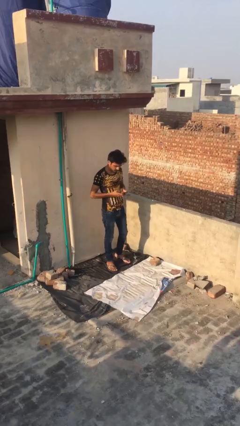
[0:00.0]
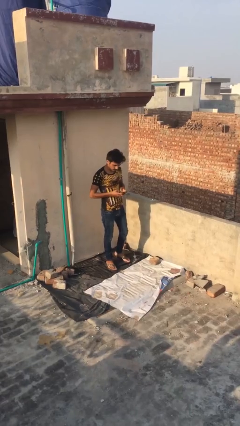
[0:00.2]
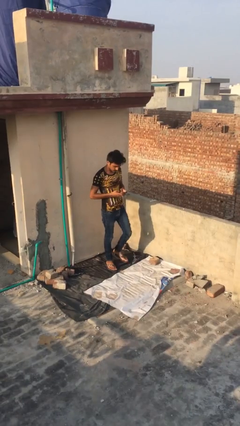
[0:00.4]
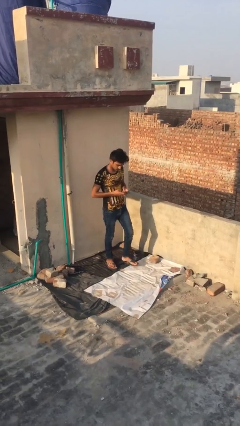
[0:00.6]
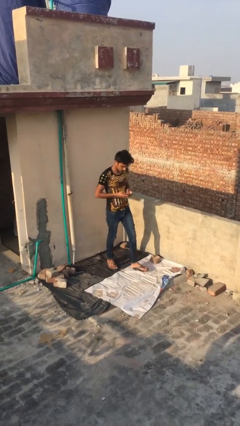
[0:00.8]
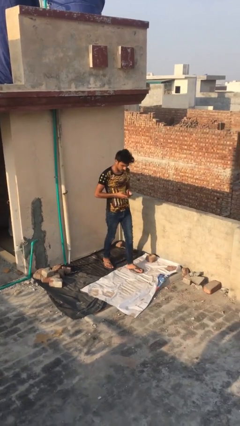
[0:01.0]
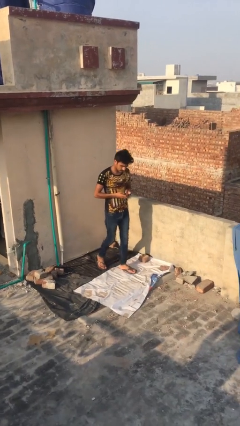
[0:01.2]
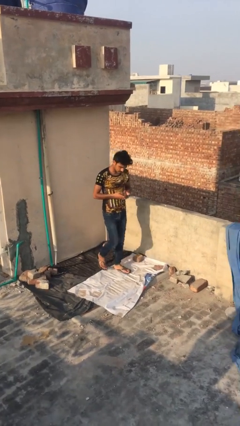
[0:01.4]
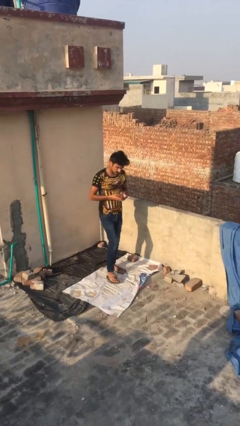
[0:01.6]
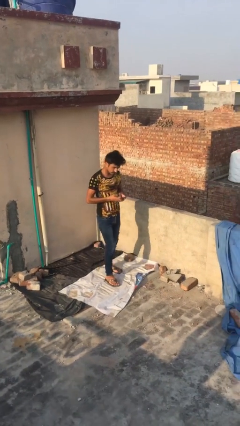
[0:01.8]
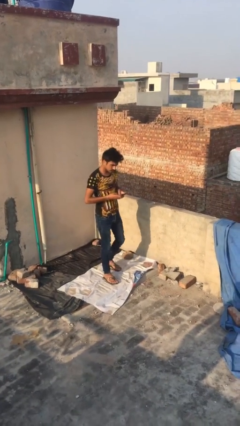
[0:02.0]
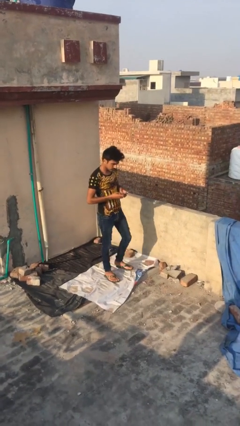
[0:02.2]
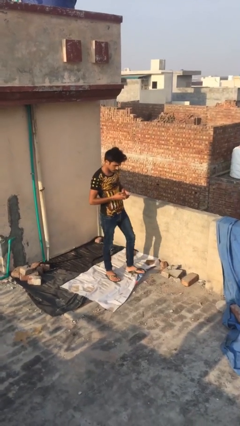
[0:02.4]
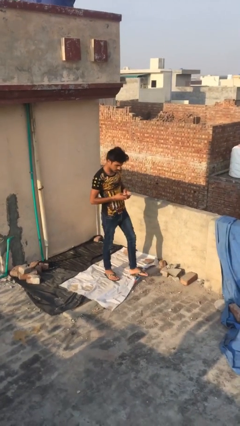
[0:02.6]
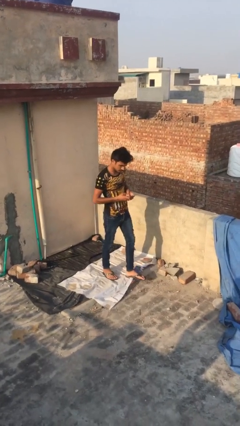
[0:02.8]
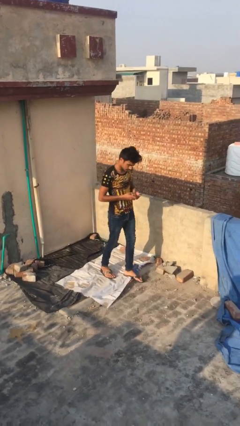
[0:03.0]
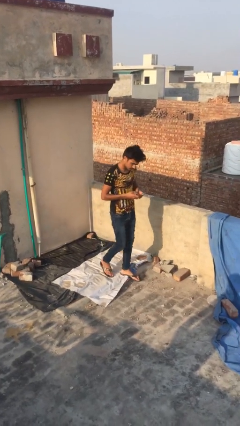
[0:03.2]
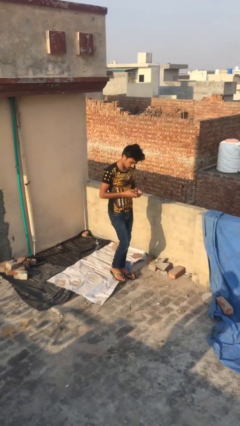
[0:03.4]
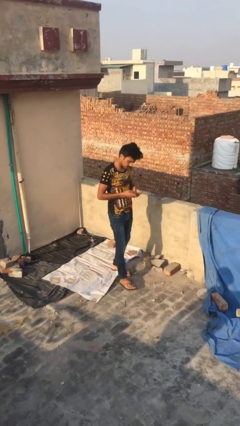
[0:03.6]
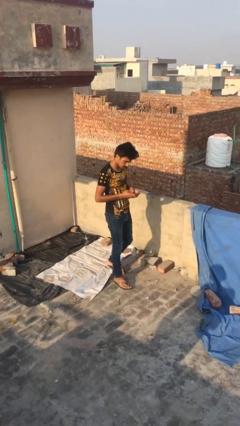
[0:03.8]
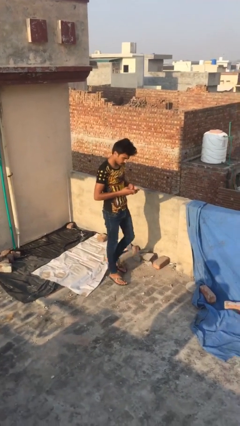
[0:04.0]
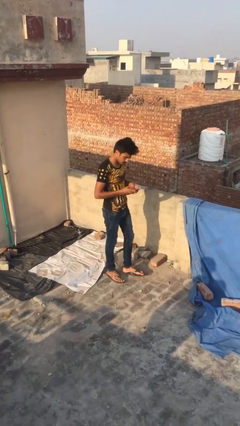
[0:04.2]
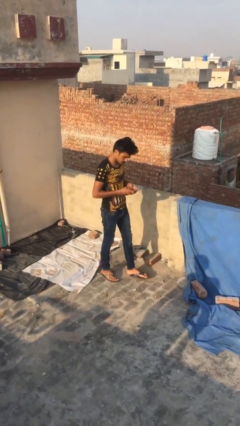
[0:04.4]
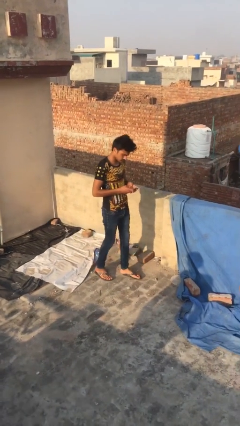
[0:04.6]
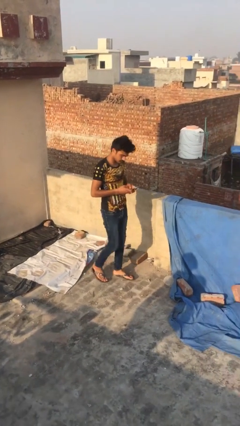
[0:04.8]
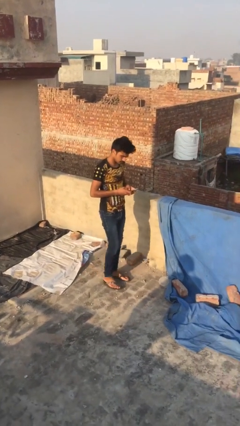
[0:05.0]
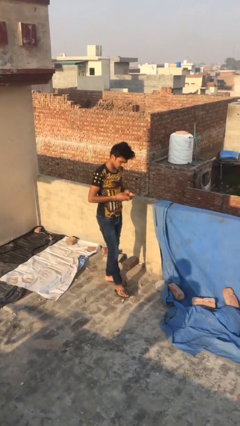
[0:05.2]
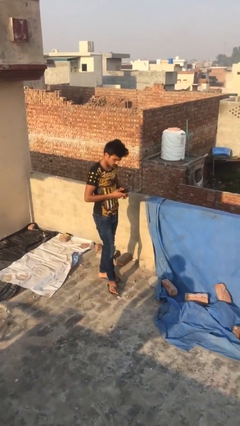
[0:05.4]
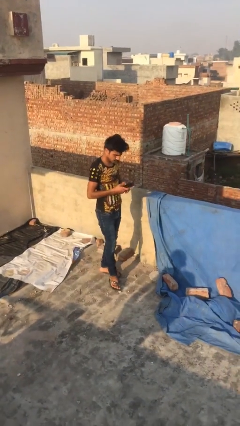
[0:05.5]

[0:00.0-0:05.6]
person texts on phone

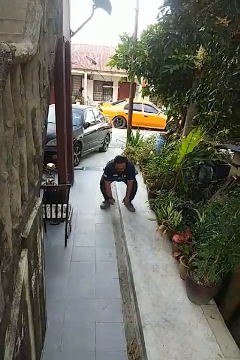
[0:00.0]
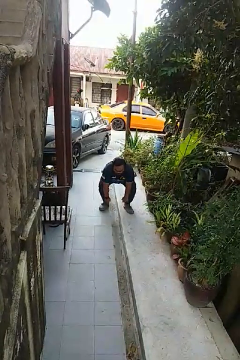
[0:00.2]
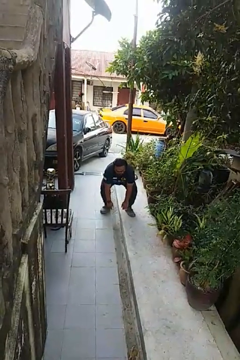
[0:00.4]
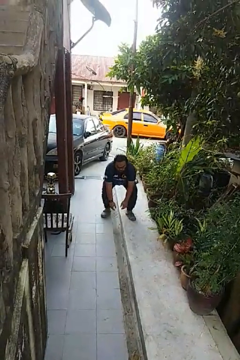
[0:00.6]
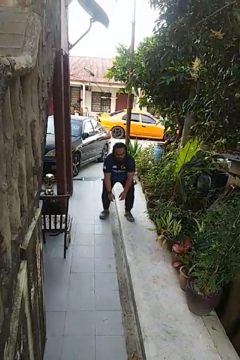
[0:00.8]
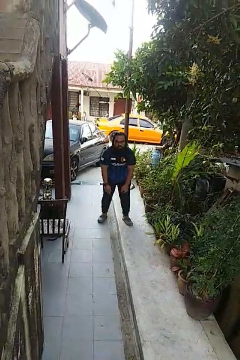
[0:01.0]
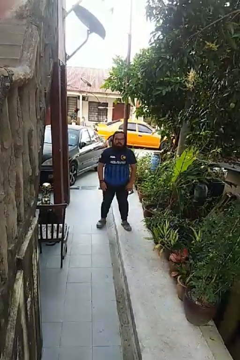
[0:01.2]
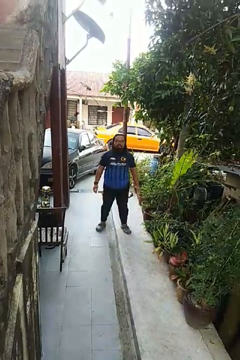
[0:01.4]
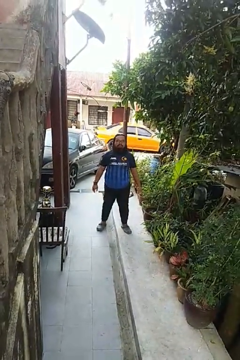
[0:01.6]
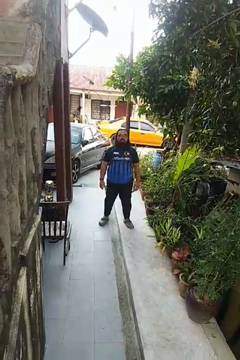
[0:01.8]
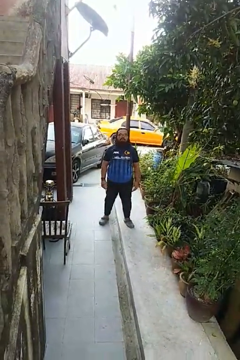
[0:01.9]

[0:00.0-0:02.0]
person stands up

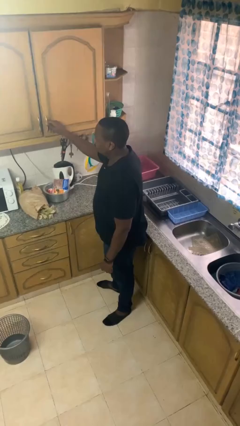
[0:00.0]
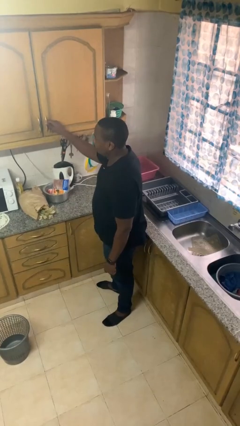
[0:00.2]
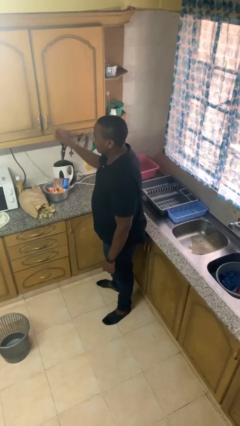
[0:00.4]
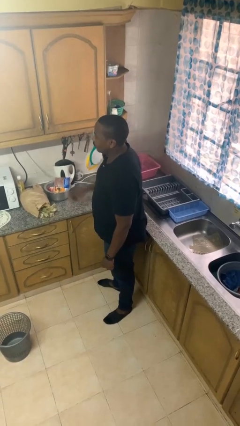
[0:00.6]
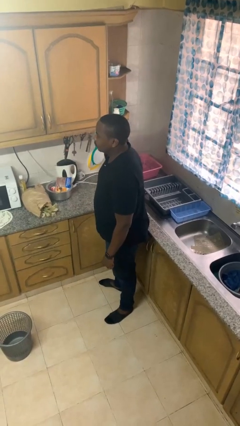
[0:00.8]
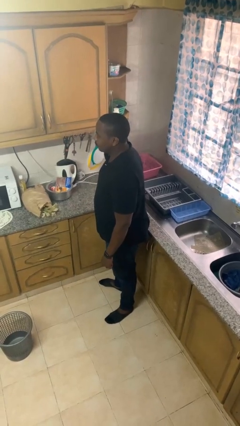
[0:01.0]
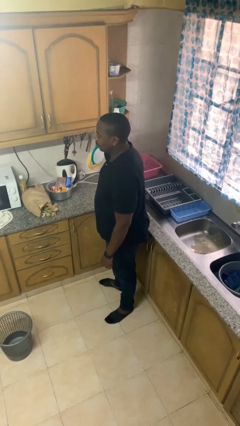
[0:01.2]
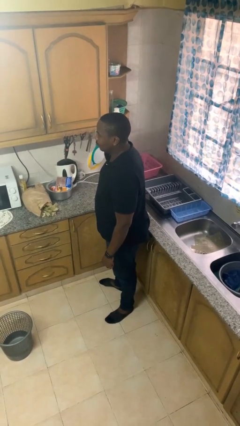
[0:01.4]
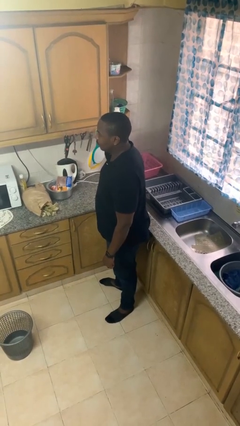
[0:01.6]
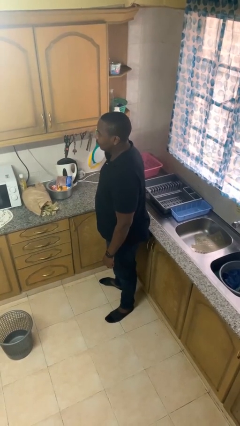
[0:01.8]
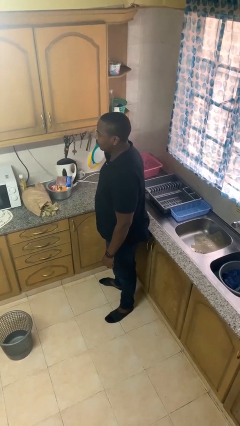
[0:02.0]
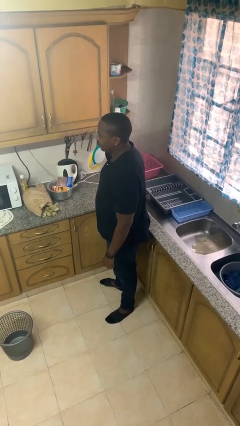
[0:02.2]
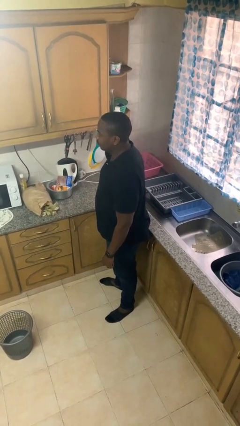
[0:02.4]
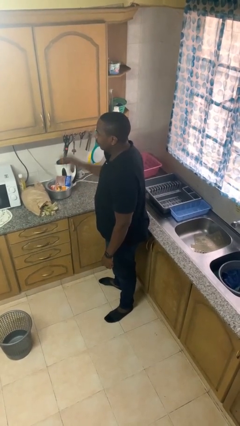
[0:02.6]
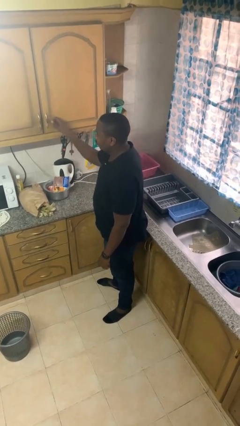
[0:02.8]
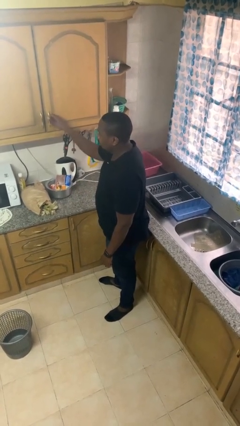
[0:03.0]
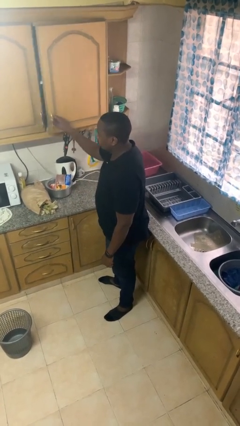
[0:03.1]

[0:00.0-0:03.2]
person closes cabinet

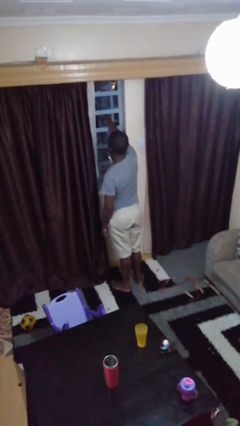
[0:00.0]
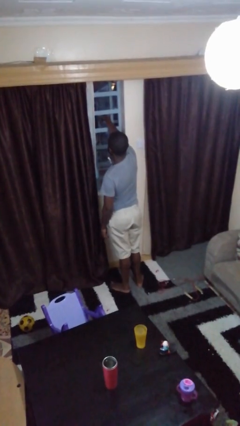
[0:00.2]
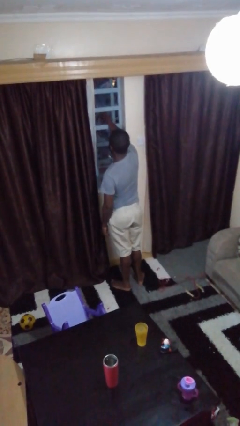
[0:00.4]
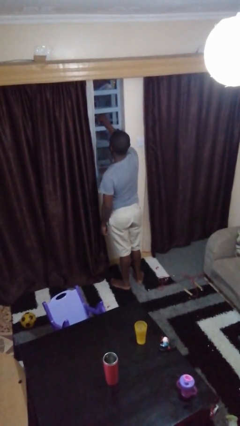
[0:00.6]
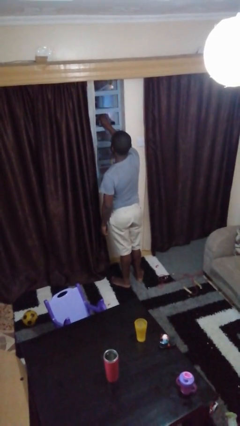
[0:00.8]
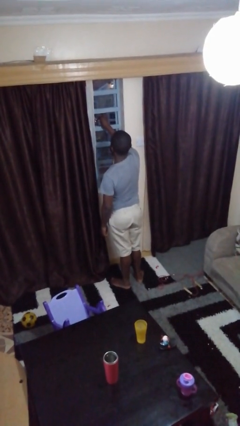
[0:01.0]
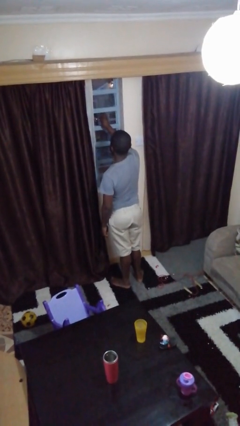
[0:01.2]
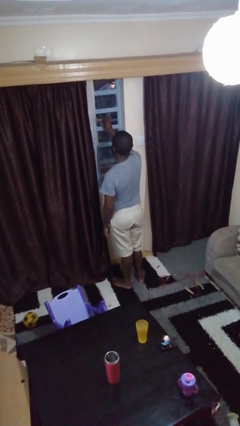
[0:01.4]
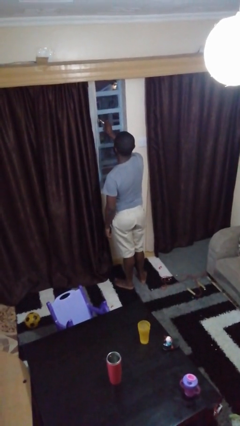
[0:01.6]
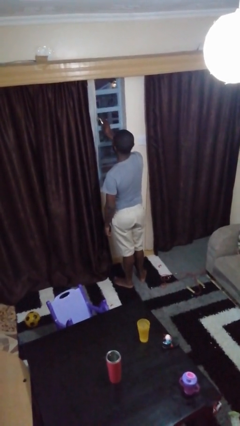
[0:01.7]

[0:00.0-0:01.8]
person closes home window

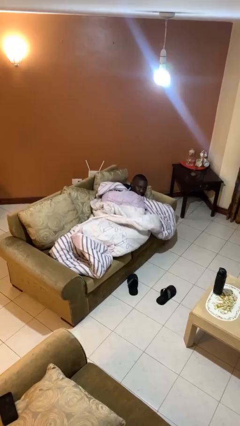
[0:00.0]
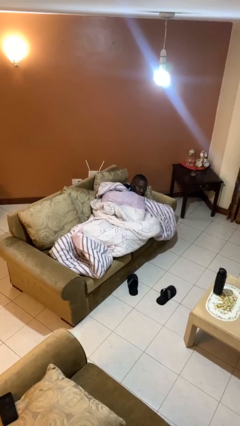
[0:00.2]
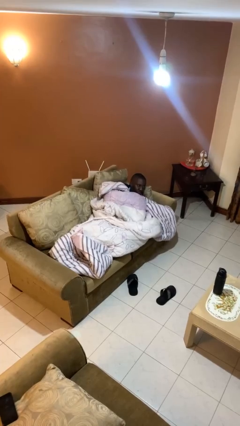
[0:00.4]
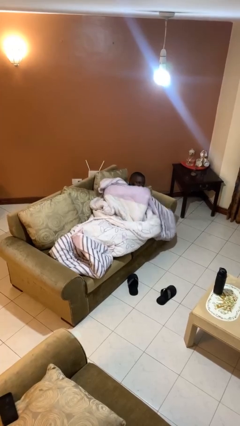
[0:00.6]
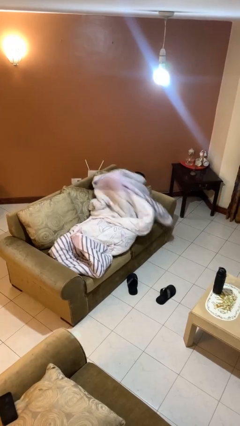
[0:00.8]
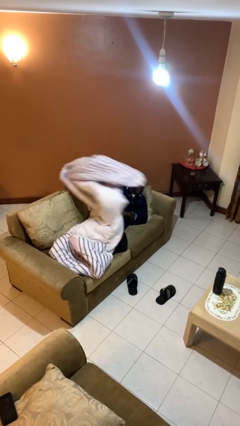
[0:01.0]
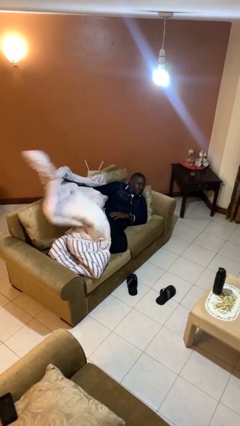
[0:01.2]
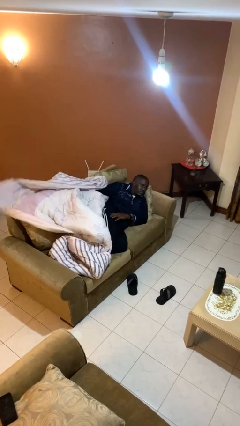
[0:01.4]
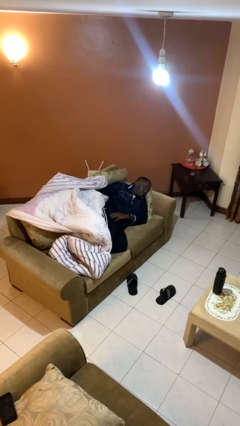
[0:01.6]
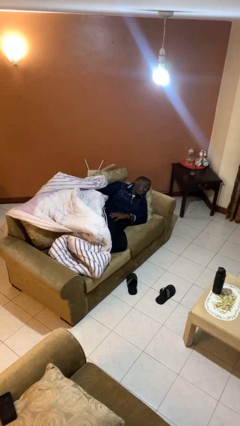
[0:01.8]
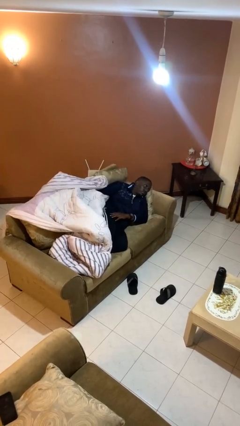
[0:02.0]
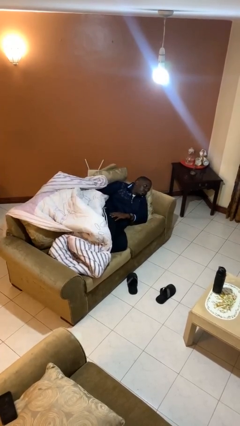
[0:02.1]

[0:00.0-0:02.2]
person uncovers with blanket

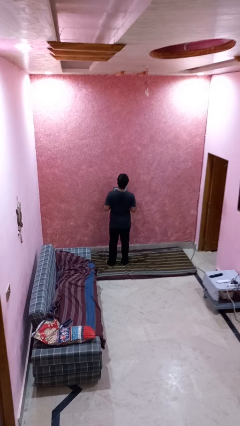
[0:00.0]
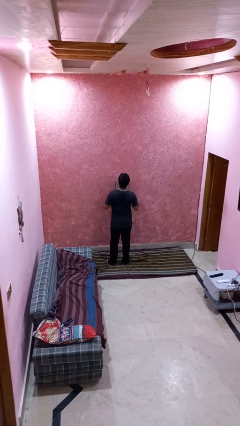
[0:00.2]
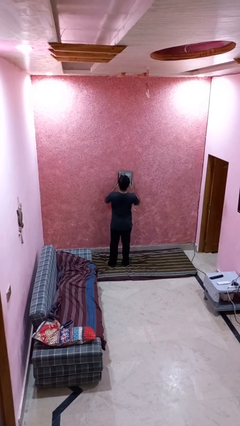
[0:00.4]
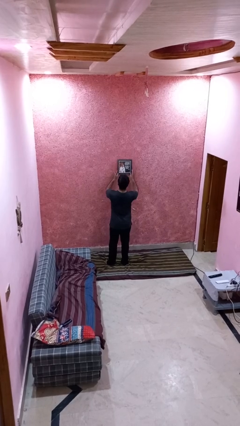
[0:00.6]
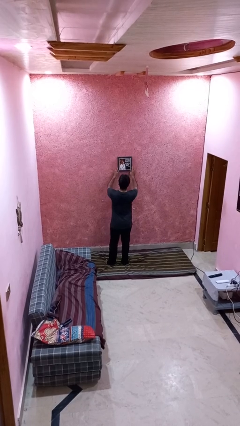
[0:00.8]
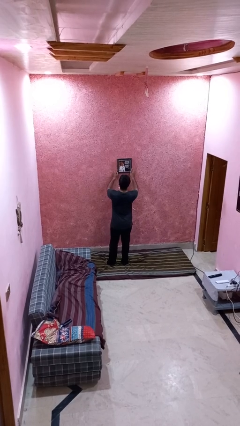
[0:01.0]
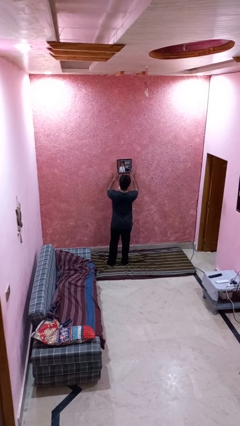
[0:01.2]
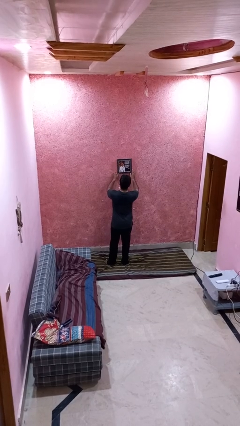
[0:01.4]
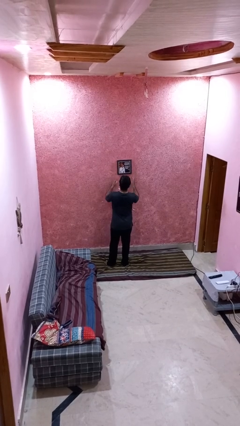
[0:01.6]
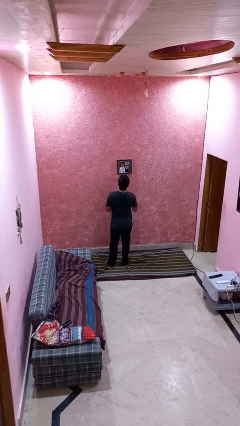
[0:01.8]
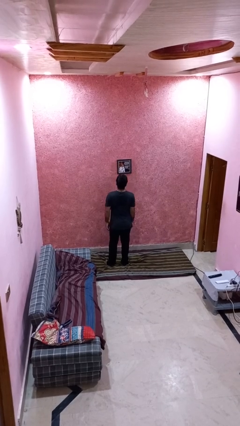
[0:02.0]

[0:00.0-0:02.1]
person puts up picture frame

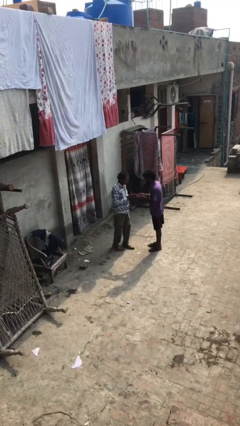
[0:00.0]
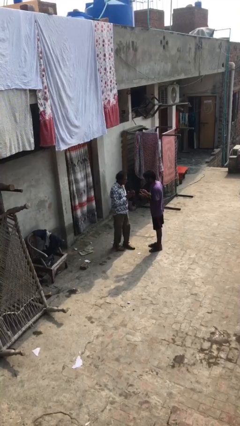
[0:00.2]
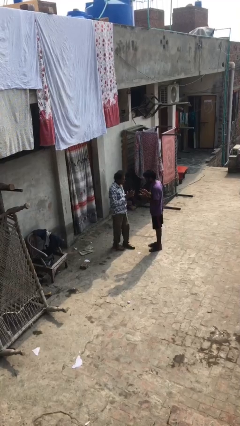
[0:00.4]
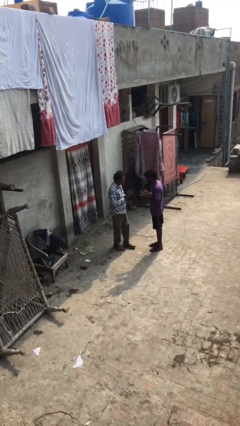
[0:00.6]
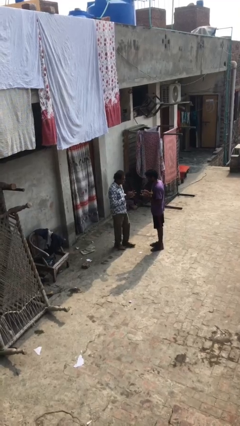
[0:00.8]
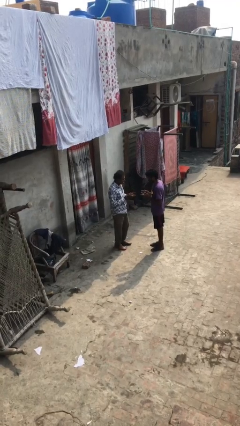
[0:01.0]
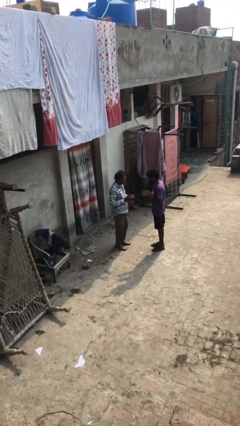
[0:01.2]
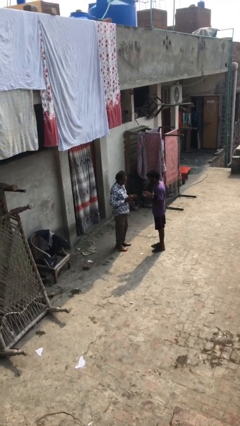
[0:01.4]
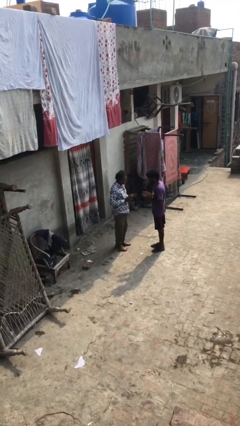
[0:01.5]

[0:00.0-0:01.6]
person talks to person
